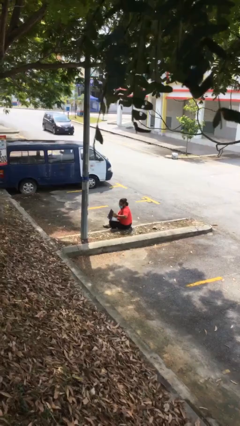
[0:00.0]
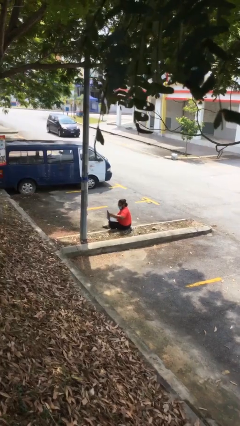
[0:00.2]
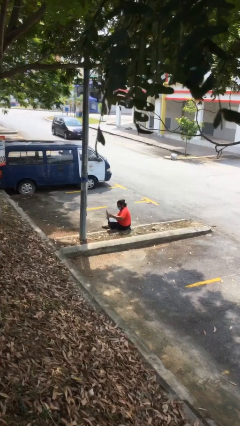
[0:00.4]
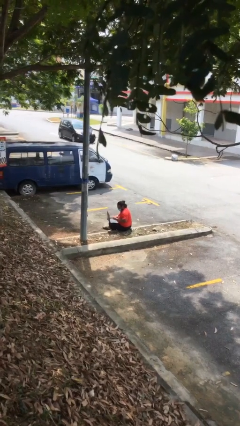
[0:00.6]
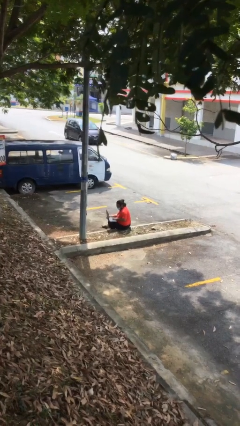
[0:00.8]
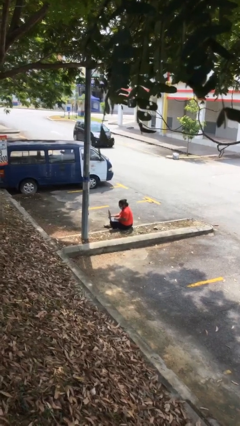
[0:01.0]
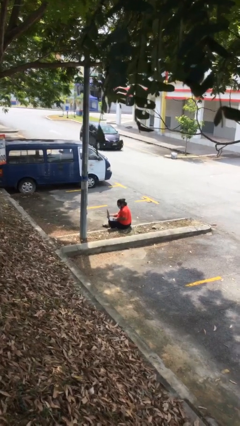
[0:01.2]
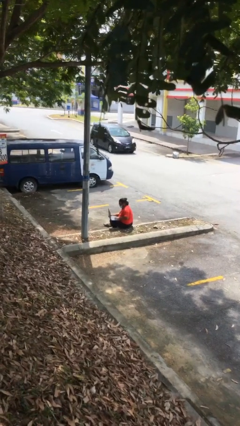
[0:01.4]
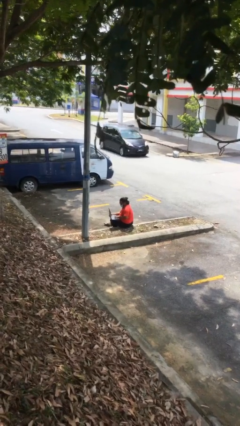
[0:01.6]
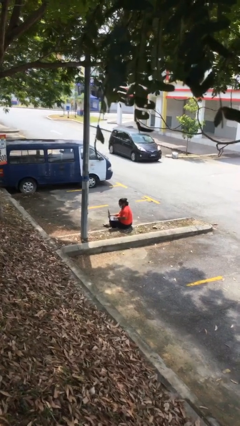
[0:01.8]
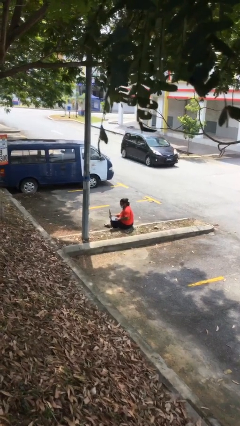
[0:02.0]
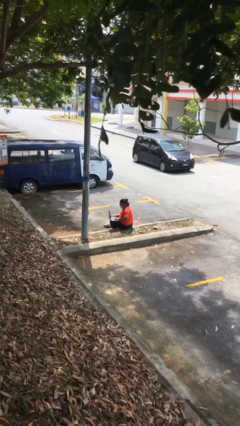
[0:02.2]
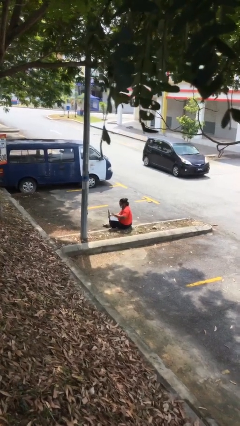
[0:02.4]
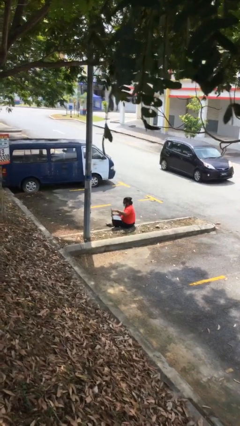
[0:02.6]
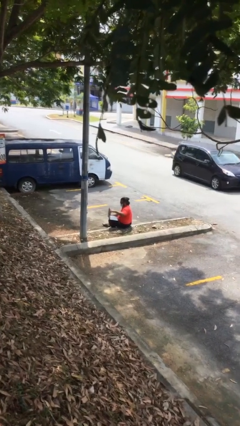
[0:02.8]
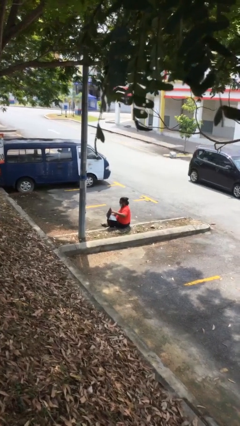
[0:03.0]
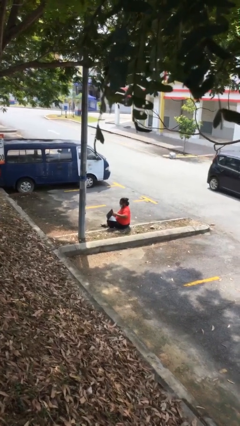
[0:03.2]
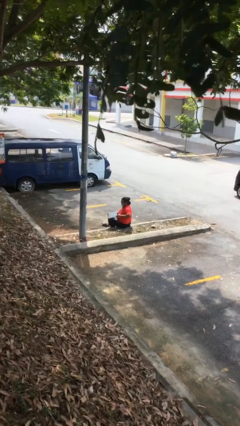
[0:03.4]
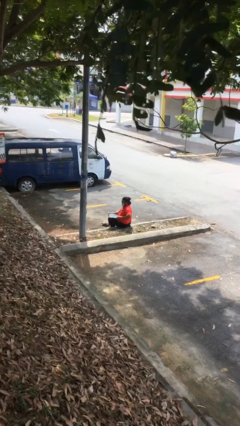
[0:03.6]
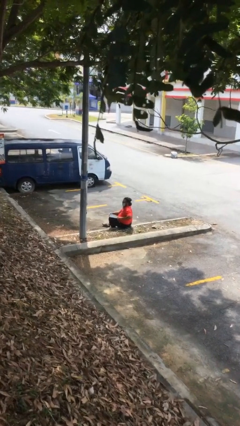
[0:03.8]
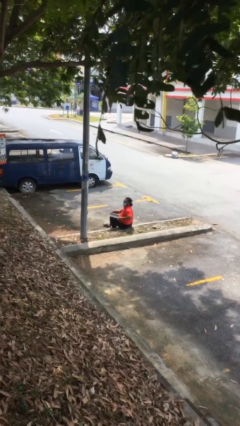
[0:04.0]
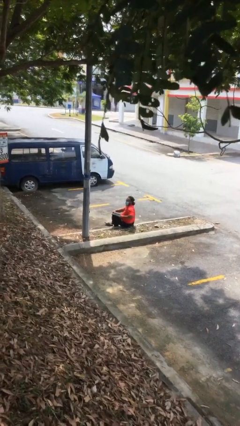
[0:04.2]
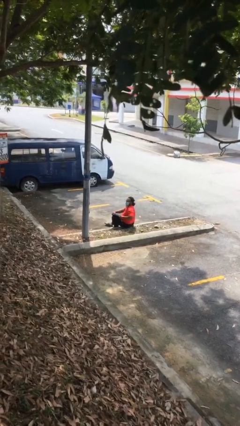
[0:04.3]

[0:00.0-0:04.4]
person interacts with laptop

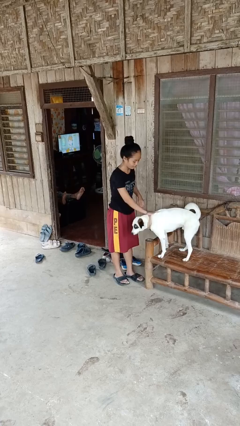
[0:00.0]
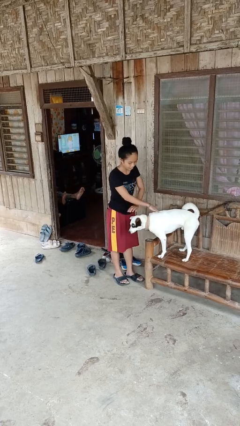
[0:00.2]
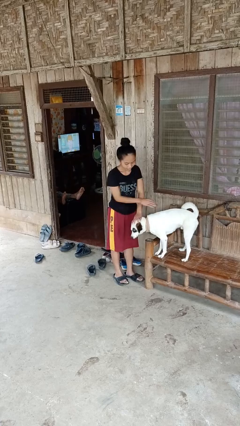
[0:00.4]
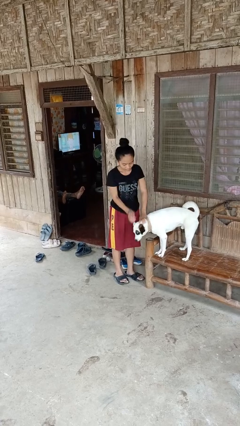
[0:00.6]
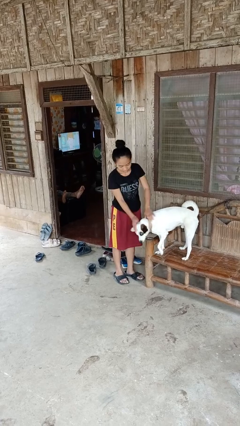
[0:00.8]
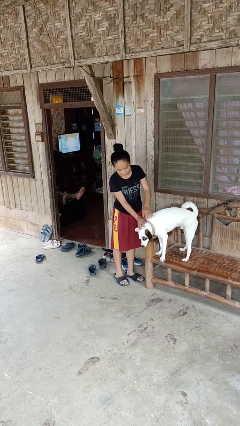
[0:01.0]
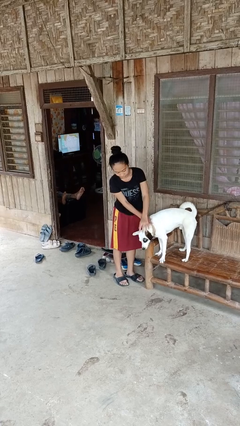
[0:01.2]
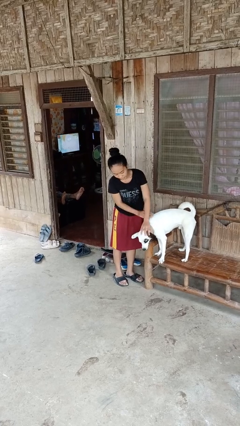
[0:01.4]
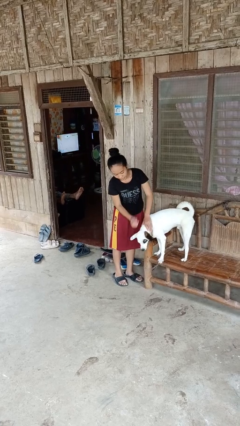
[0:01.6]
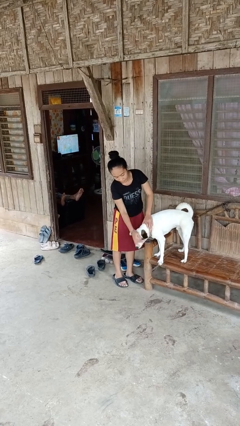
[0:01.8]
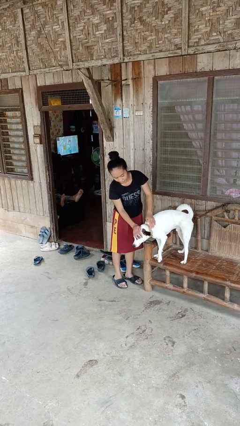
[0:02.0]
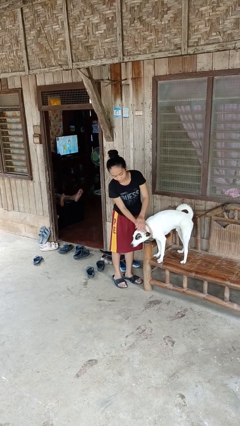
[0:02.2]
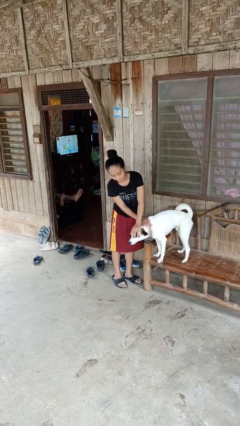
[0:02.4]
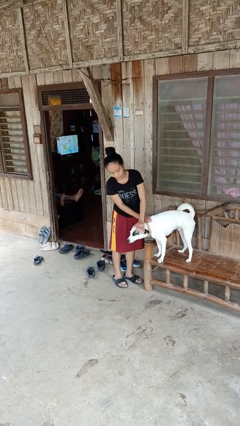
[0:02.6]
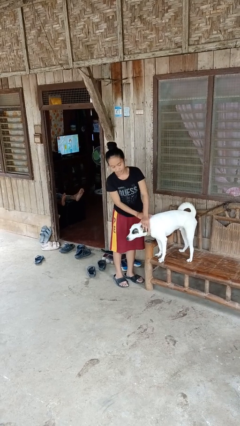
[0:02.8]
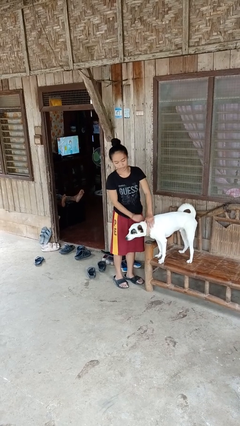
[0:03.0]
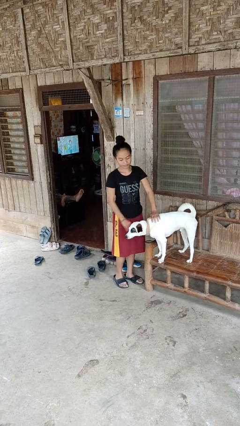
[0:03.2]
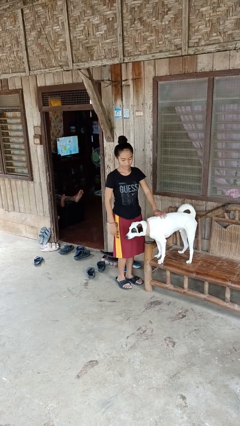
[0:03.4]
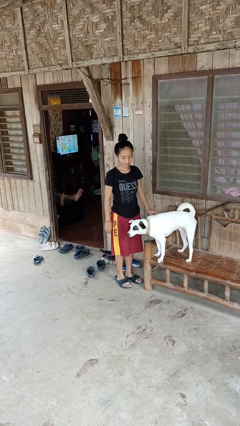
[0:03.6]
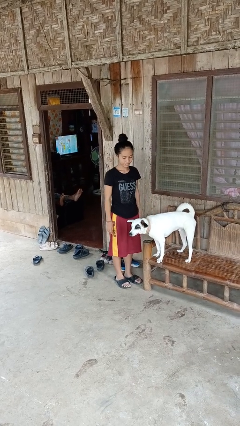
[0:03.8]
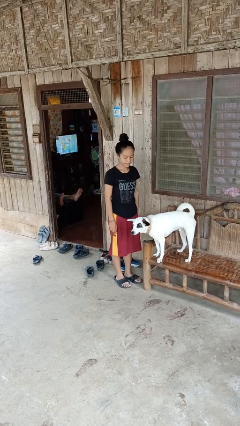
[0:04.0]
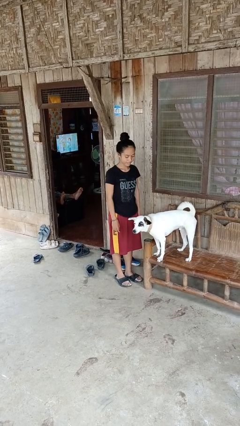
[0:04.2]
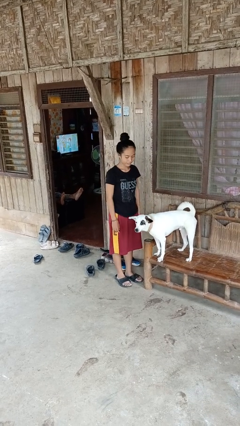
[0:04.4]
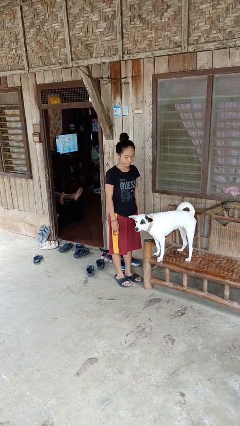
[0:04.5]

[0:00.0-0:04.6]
person pets dog

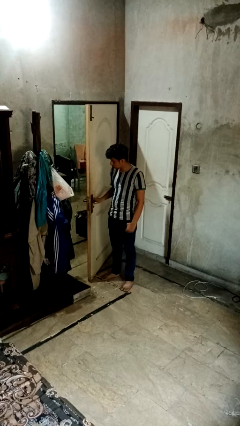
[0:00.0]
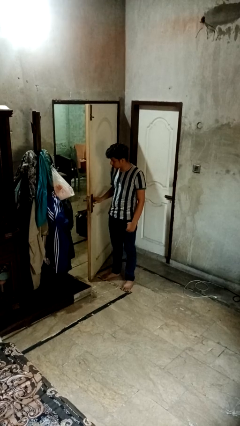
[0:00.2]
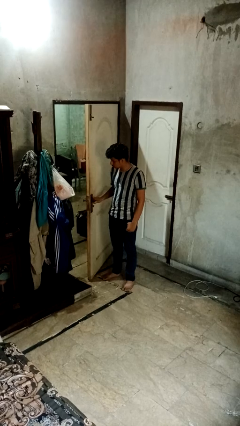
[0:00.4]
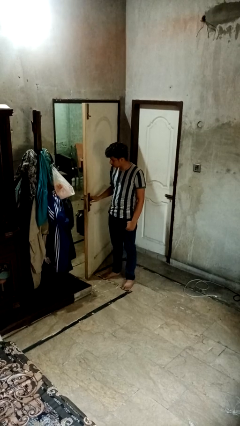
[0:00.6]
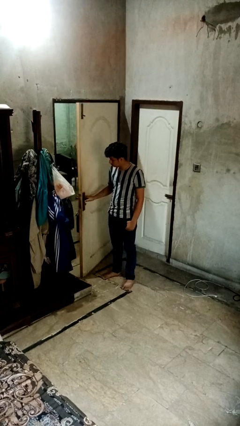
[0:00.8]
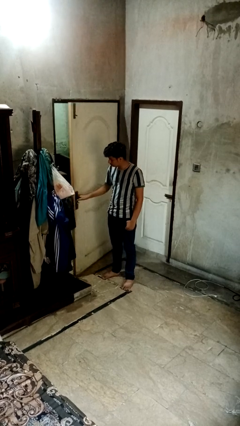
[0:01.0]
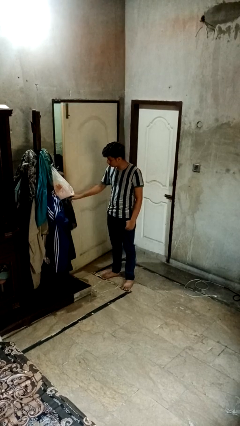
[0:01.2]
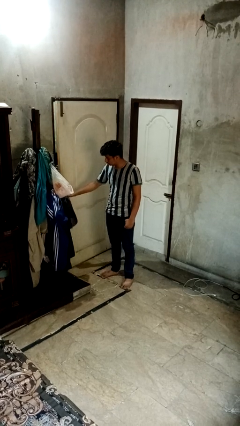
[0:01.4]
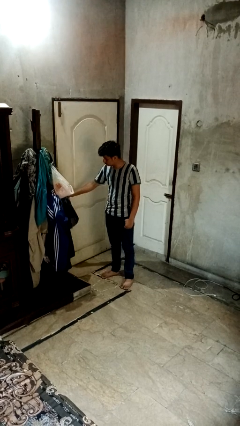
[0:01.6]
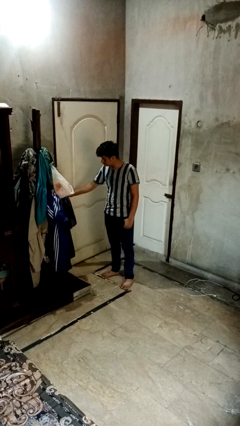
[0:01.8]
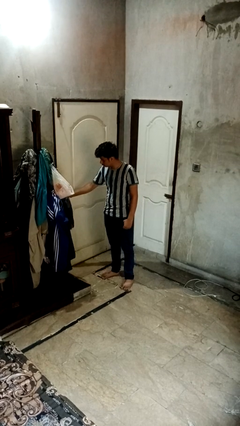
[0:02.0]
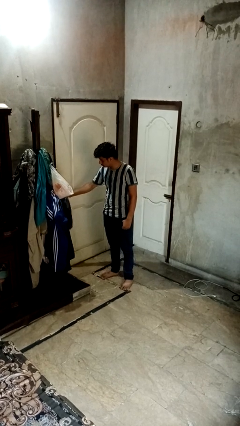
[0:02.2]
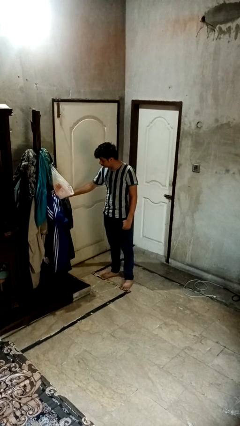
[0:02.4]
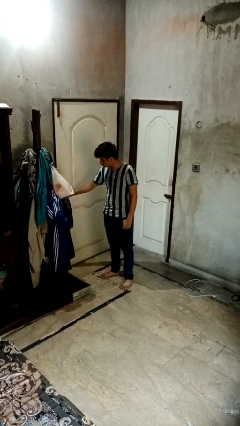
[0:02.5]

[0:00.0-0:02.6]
person closes sliding door

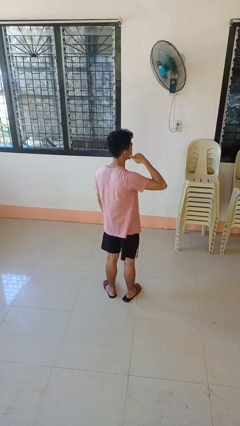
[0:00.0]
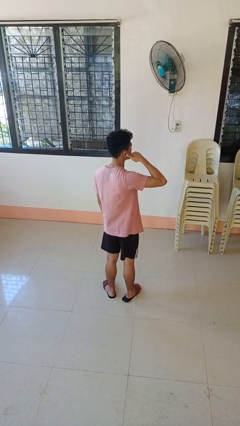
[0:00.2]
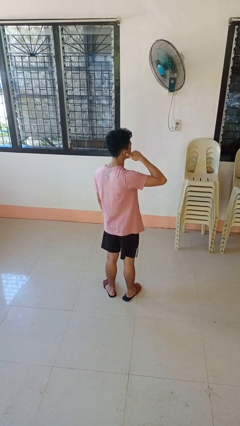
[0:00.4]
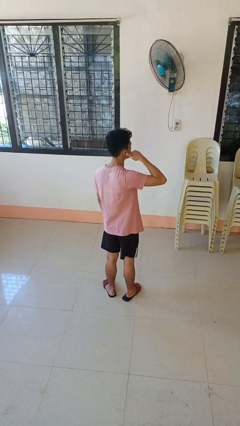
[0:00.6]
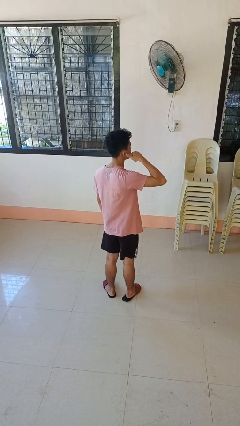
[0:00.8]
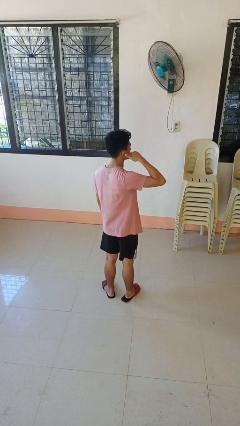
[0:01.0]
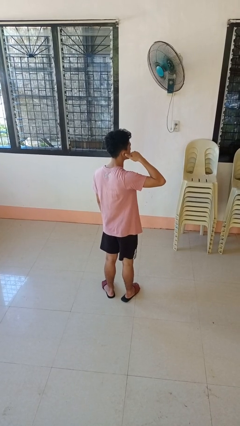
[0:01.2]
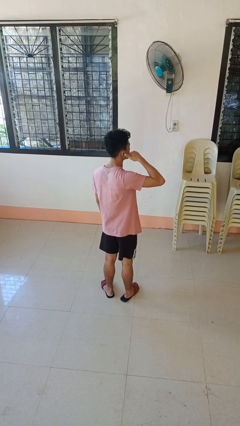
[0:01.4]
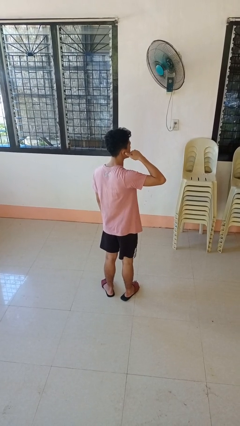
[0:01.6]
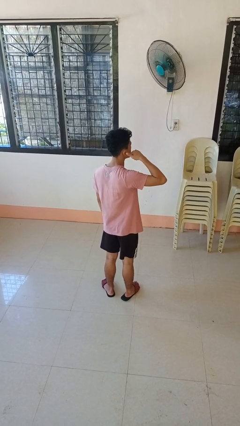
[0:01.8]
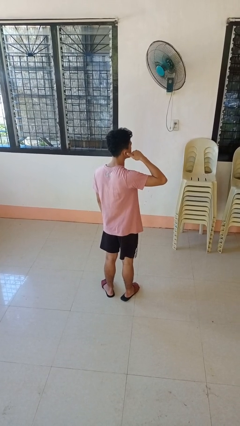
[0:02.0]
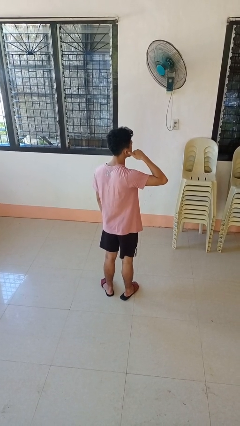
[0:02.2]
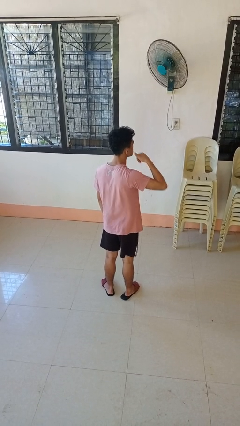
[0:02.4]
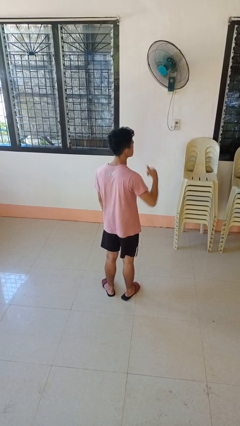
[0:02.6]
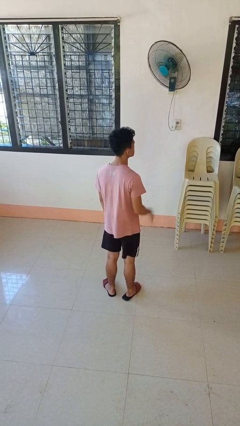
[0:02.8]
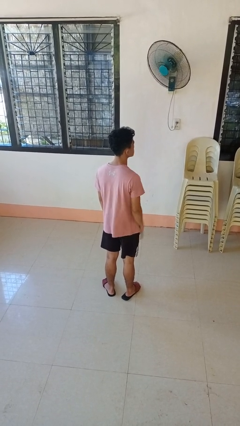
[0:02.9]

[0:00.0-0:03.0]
person gestures call me

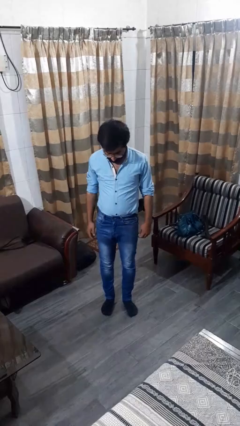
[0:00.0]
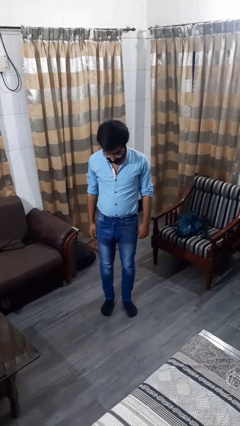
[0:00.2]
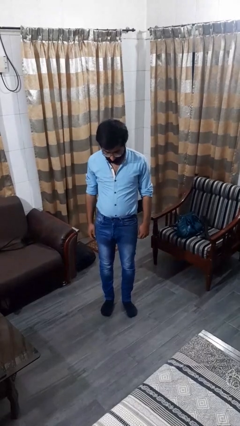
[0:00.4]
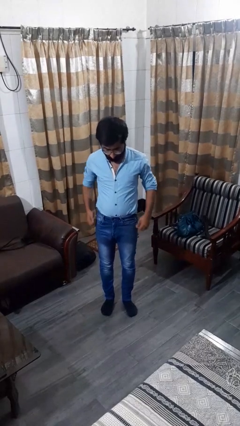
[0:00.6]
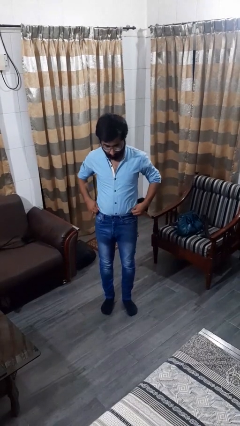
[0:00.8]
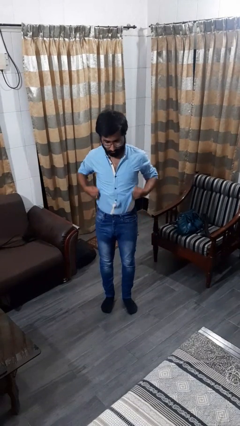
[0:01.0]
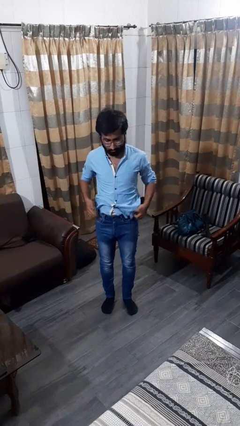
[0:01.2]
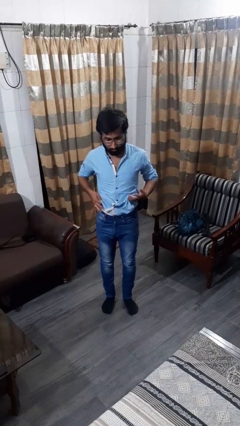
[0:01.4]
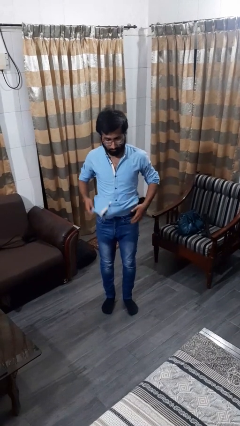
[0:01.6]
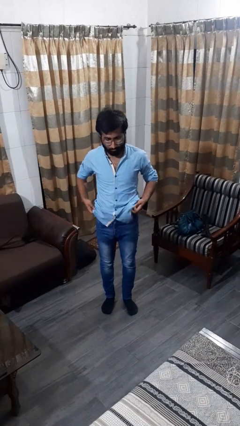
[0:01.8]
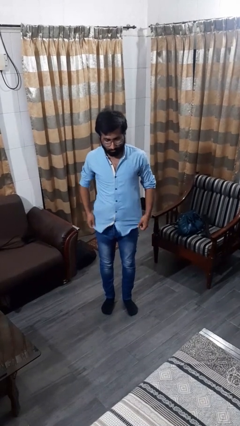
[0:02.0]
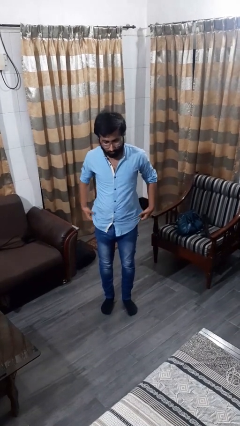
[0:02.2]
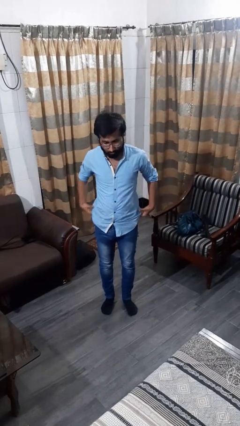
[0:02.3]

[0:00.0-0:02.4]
person untucks shirt

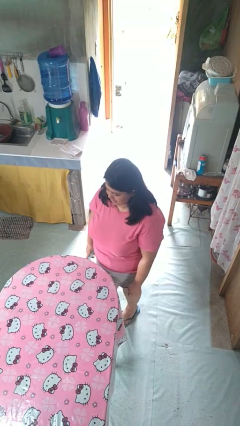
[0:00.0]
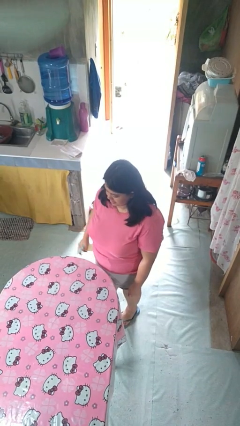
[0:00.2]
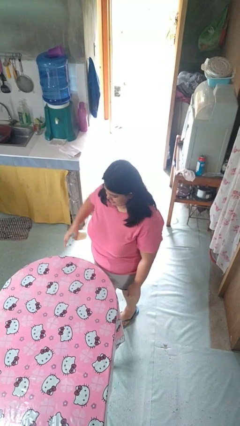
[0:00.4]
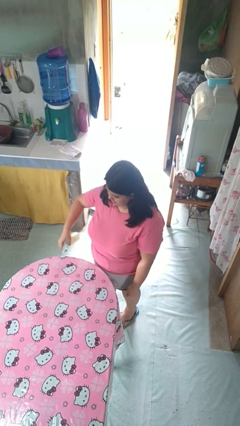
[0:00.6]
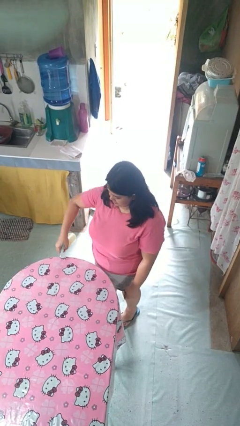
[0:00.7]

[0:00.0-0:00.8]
person sprays from bottle
